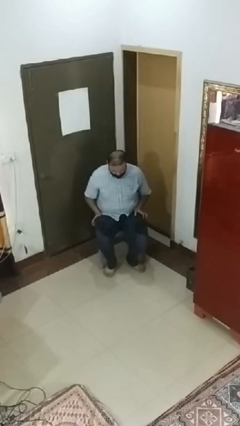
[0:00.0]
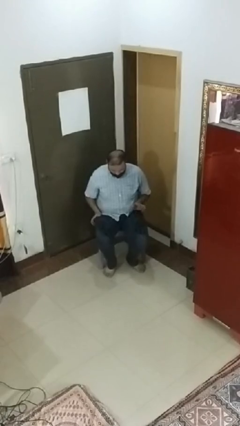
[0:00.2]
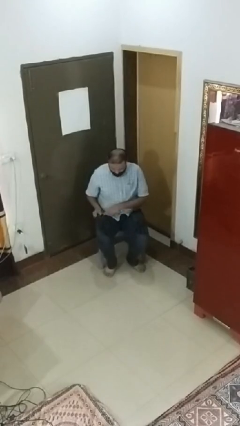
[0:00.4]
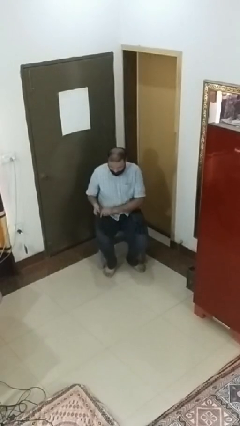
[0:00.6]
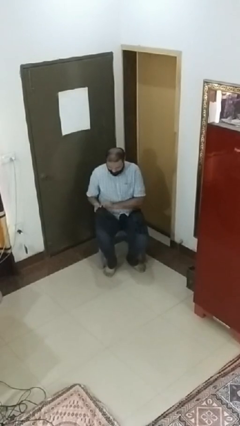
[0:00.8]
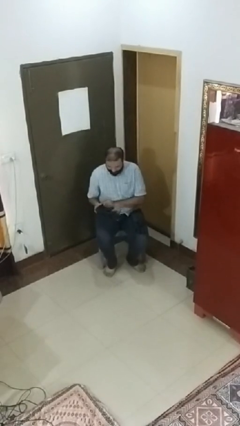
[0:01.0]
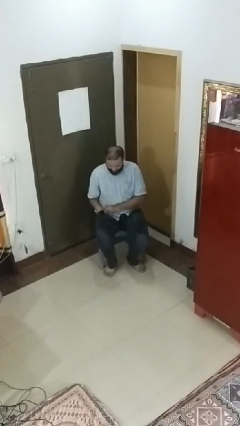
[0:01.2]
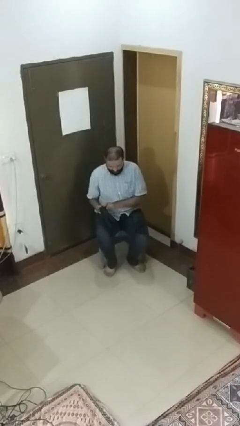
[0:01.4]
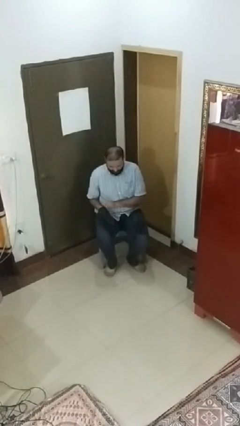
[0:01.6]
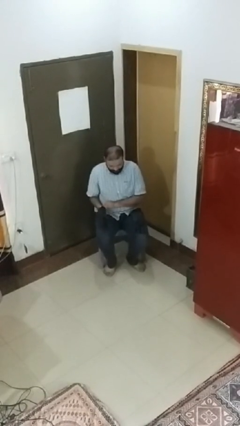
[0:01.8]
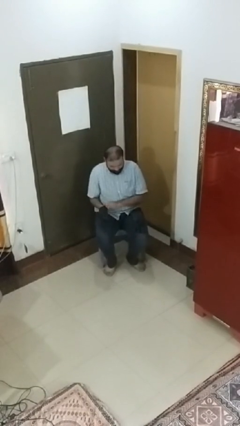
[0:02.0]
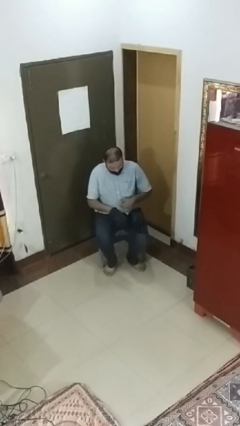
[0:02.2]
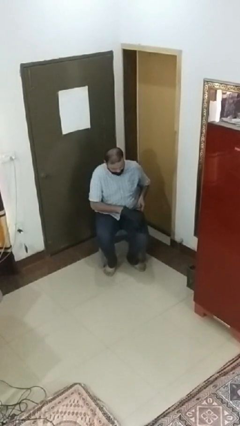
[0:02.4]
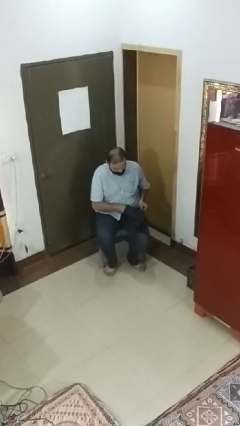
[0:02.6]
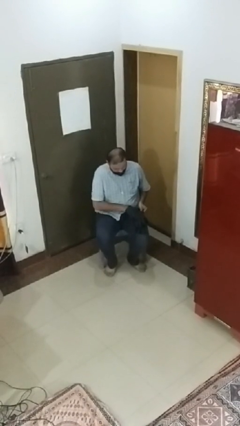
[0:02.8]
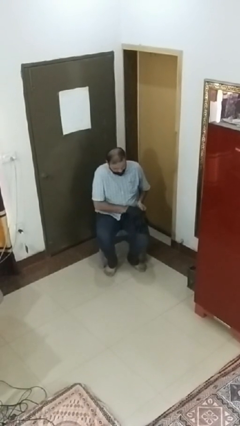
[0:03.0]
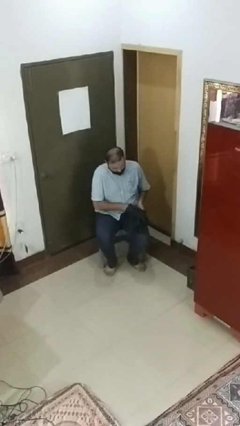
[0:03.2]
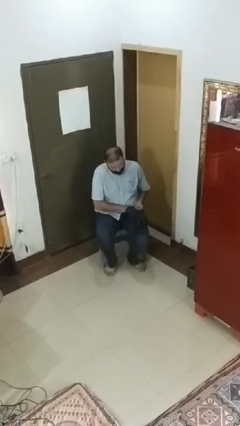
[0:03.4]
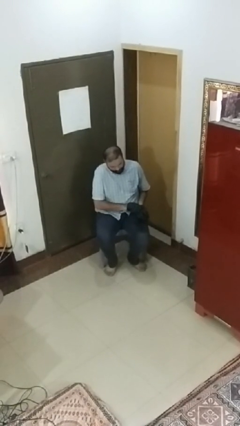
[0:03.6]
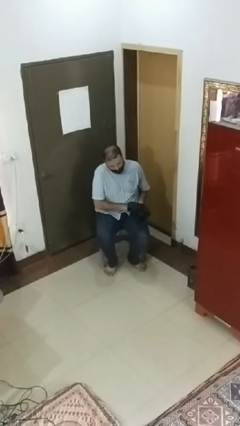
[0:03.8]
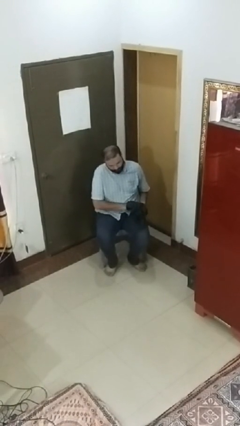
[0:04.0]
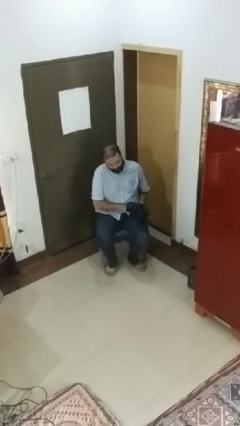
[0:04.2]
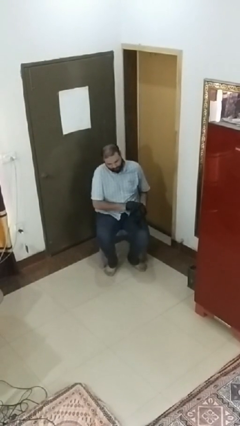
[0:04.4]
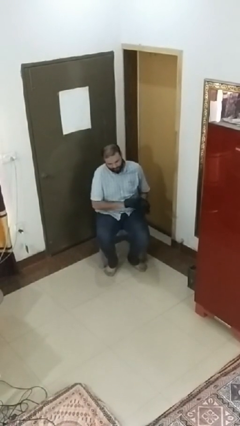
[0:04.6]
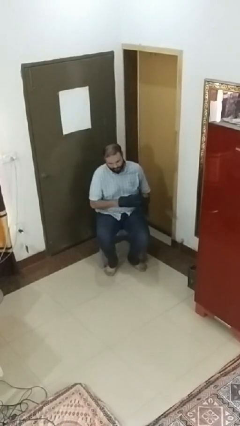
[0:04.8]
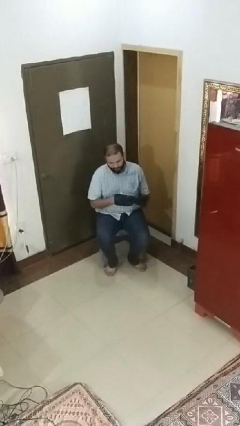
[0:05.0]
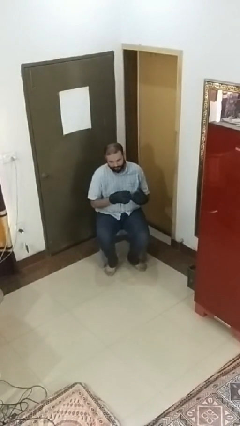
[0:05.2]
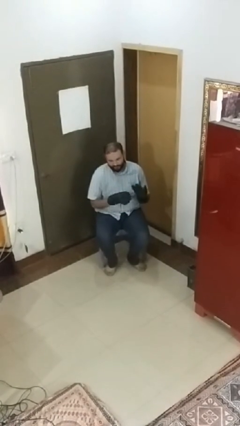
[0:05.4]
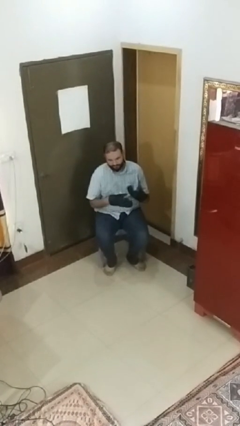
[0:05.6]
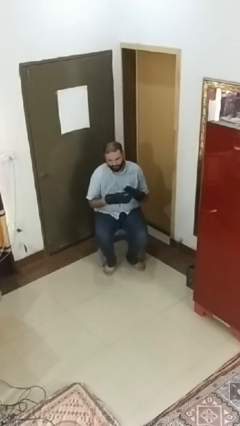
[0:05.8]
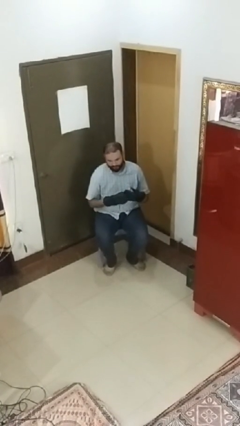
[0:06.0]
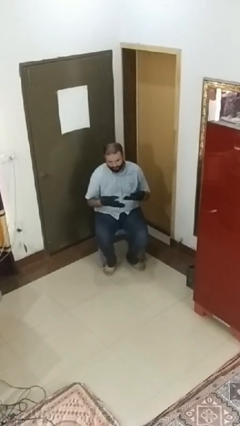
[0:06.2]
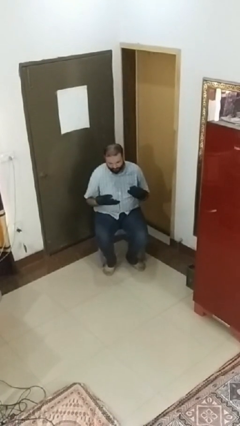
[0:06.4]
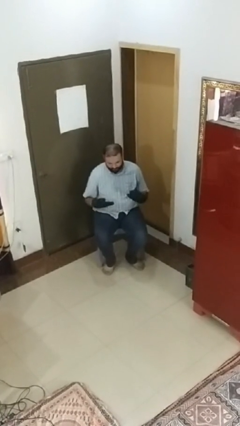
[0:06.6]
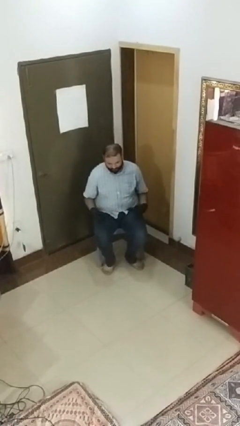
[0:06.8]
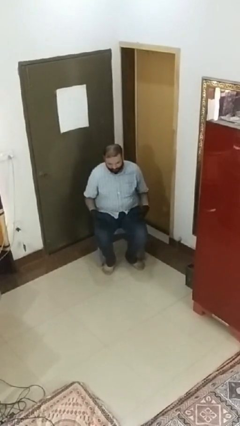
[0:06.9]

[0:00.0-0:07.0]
person puts on gloves

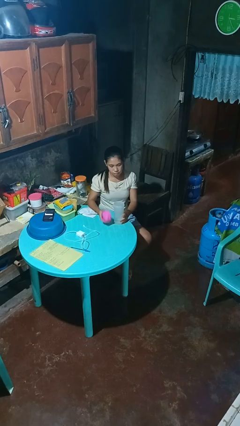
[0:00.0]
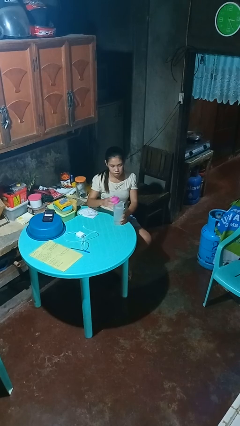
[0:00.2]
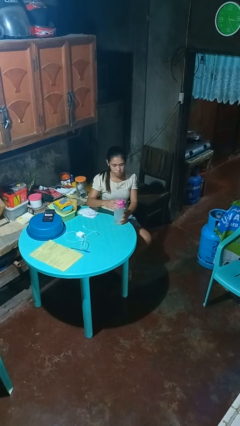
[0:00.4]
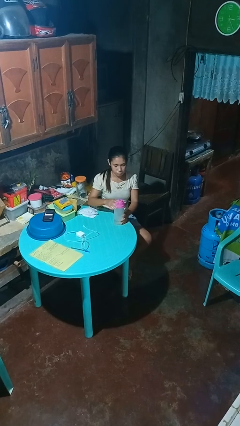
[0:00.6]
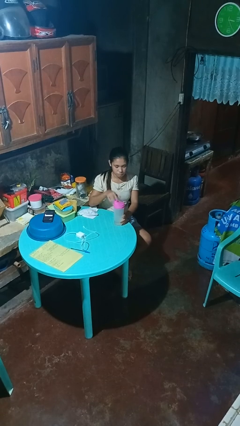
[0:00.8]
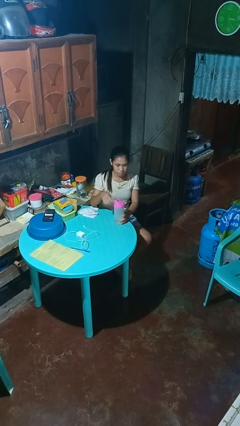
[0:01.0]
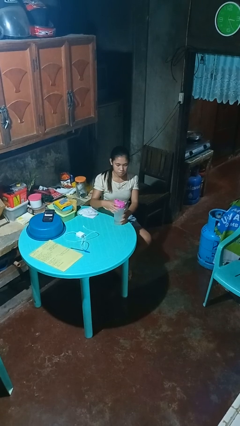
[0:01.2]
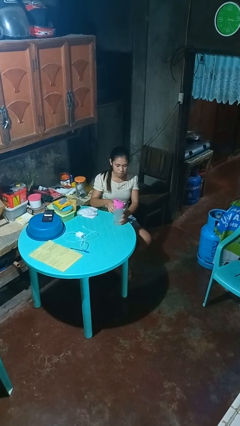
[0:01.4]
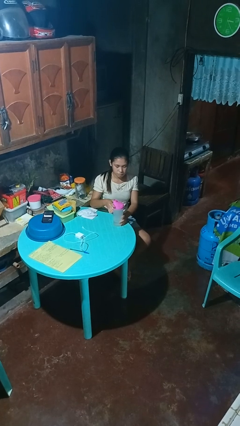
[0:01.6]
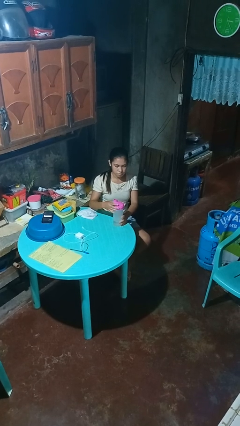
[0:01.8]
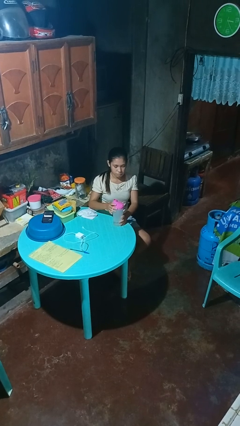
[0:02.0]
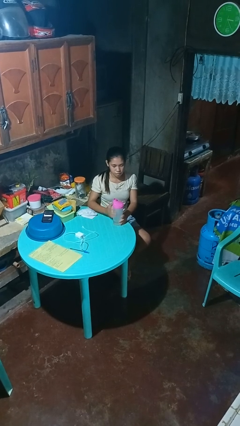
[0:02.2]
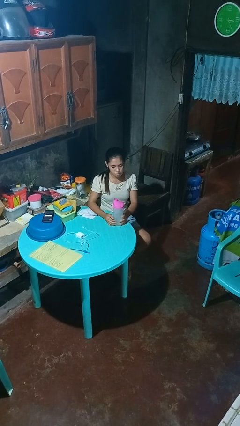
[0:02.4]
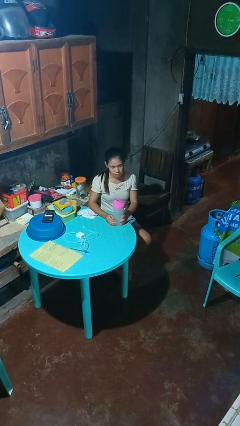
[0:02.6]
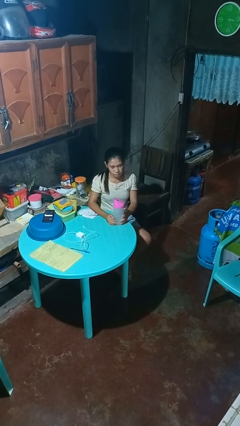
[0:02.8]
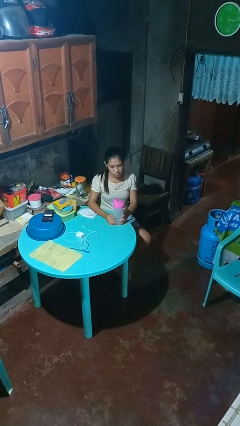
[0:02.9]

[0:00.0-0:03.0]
person screws lid to bottle

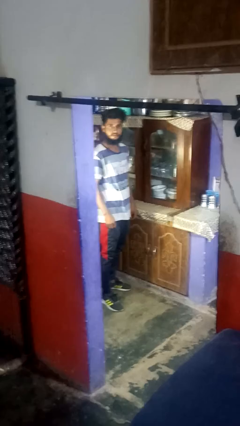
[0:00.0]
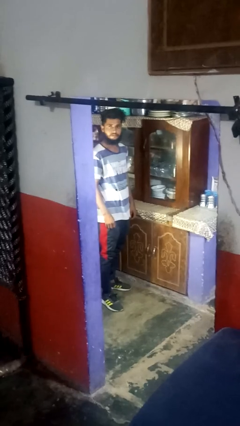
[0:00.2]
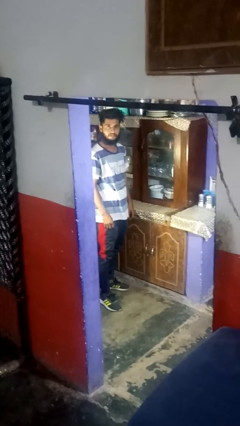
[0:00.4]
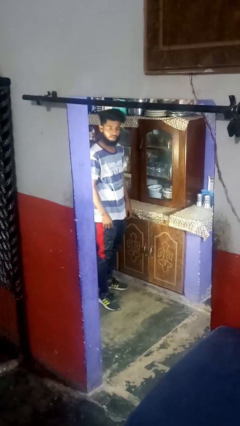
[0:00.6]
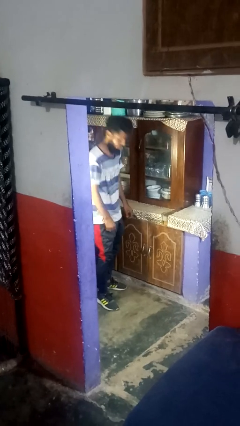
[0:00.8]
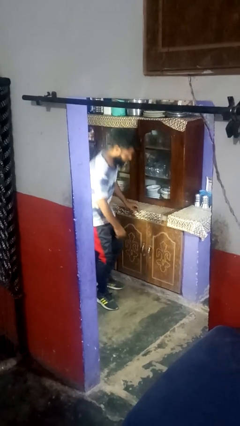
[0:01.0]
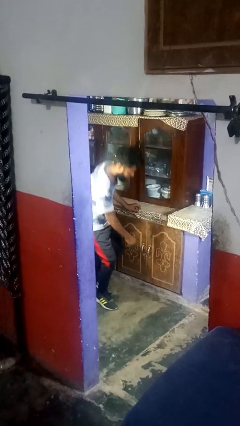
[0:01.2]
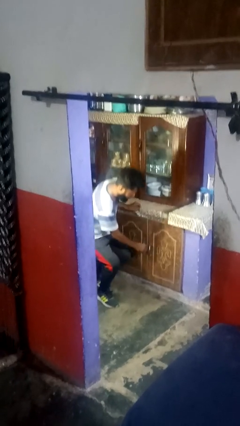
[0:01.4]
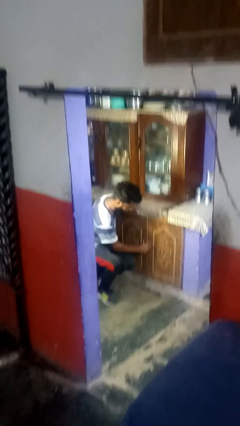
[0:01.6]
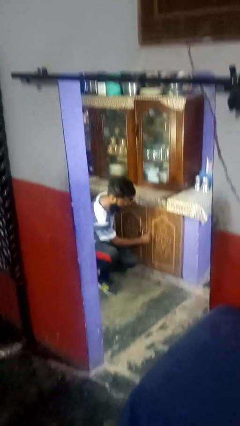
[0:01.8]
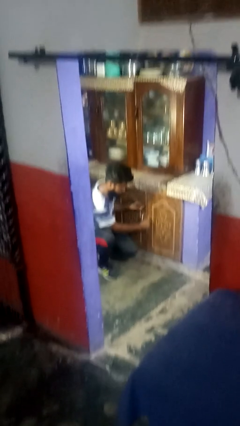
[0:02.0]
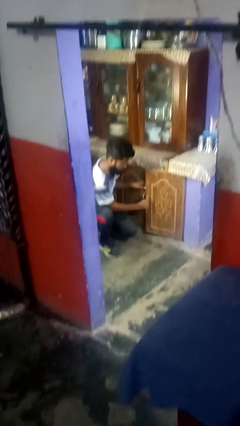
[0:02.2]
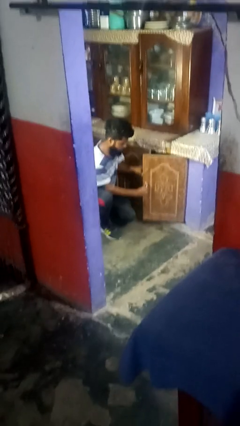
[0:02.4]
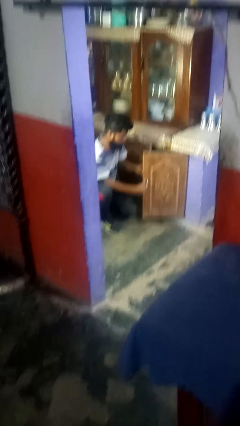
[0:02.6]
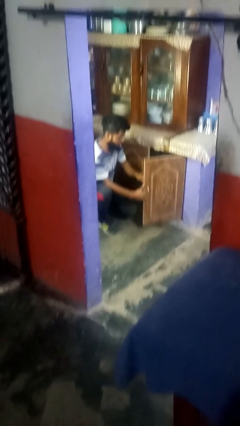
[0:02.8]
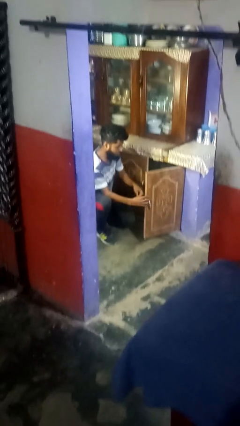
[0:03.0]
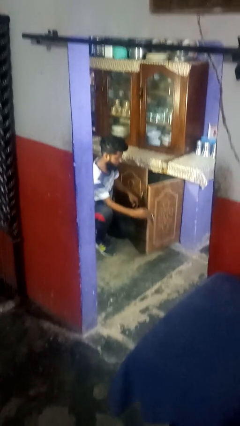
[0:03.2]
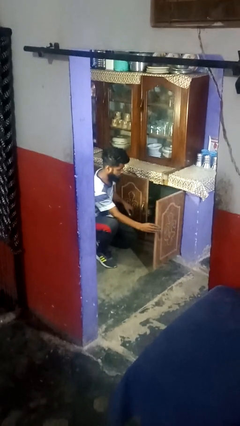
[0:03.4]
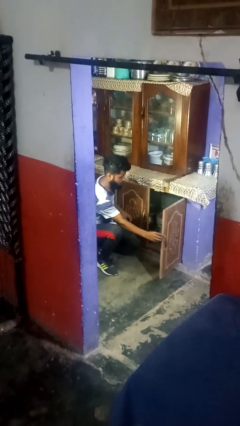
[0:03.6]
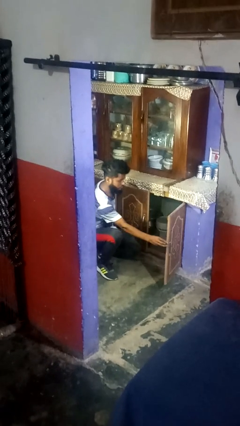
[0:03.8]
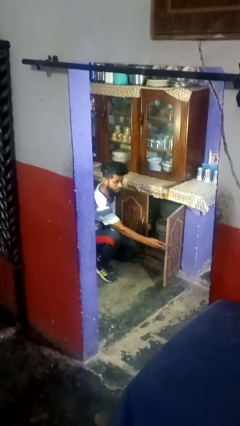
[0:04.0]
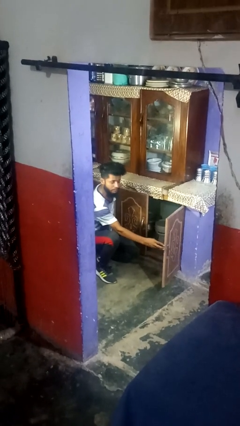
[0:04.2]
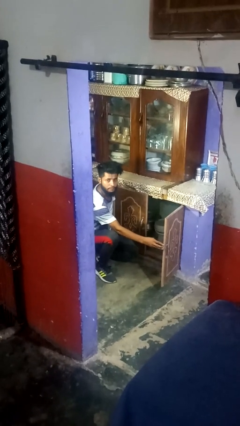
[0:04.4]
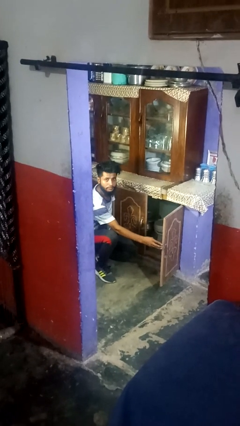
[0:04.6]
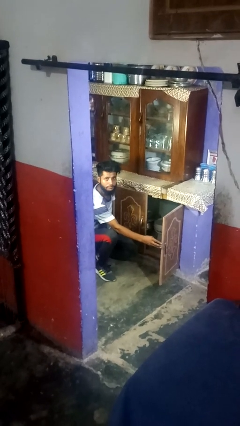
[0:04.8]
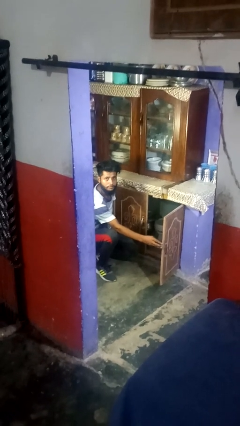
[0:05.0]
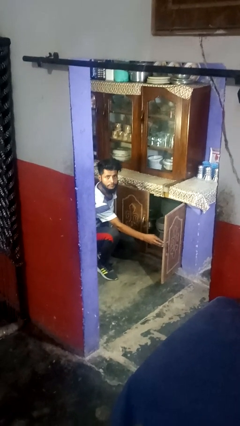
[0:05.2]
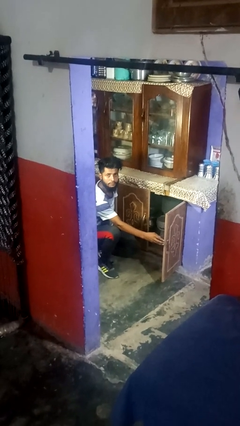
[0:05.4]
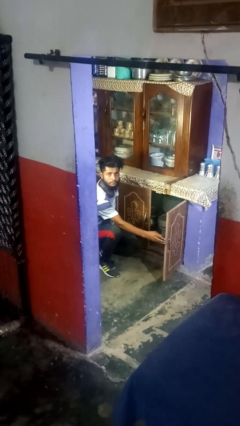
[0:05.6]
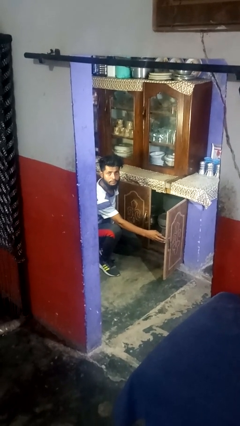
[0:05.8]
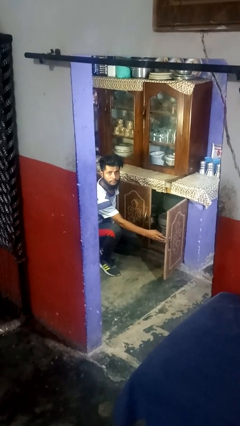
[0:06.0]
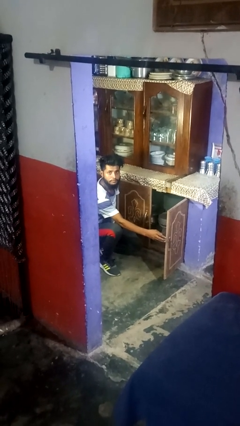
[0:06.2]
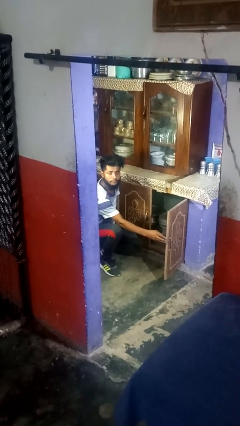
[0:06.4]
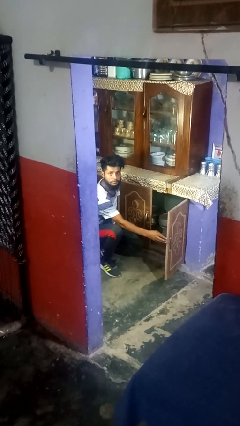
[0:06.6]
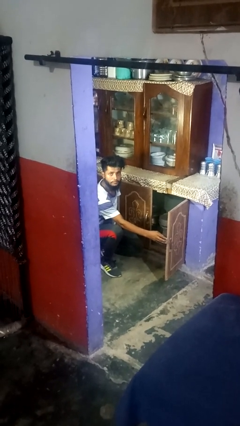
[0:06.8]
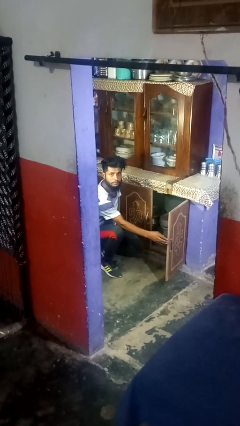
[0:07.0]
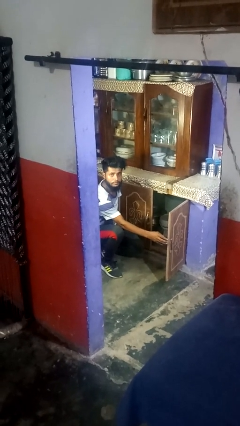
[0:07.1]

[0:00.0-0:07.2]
person opens cabinet

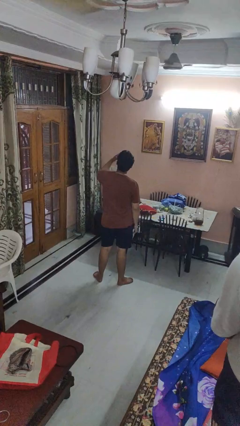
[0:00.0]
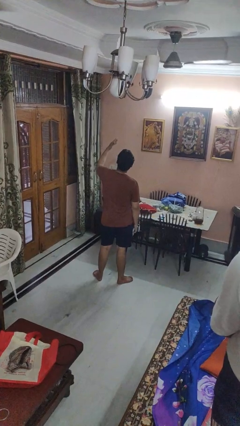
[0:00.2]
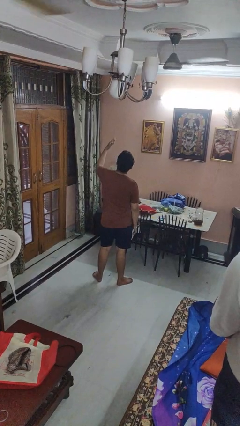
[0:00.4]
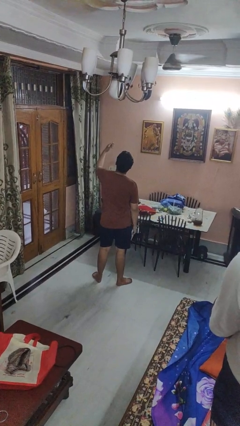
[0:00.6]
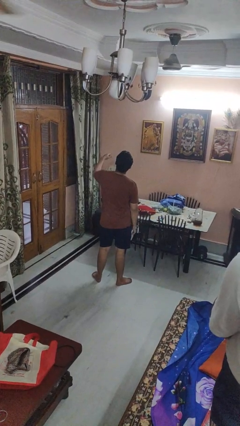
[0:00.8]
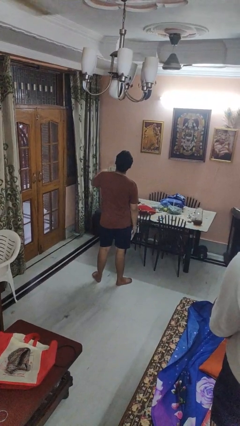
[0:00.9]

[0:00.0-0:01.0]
person gestures blow kiss
